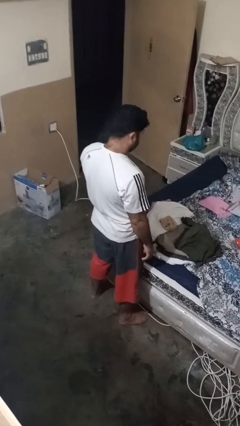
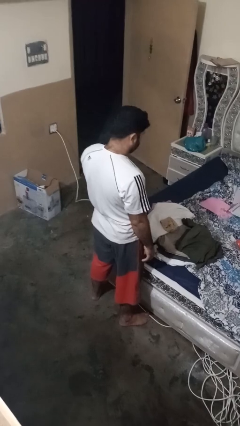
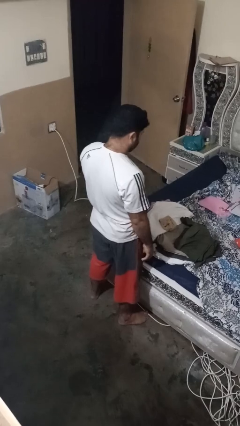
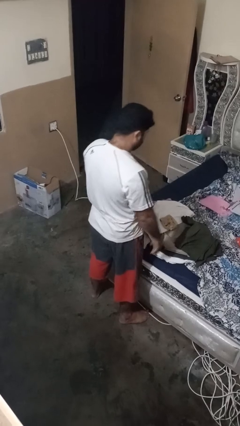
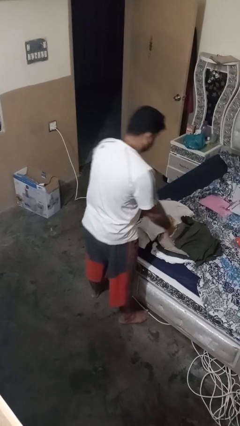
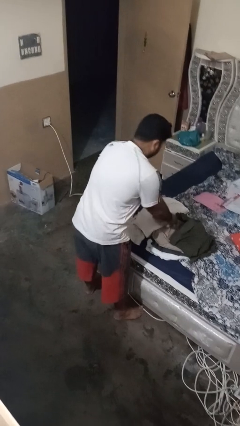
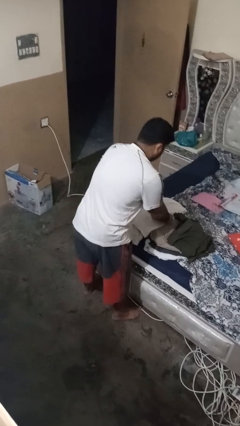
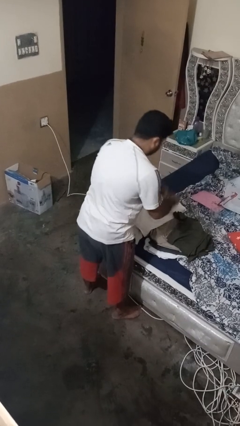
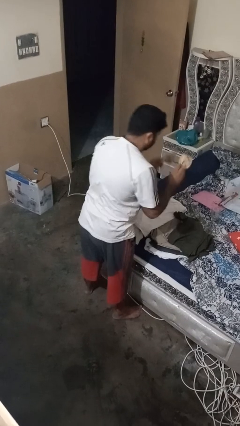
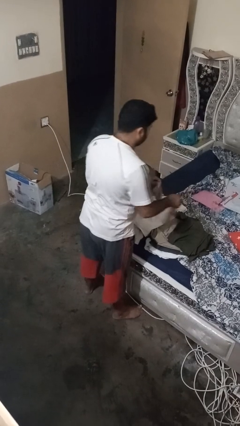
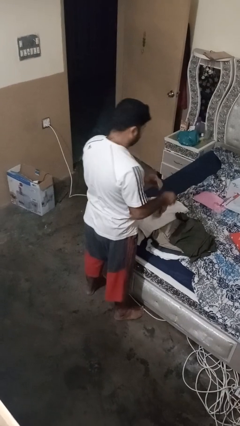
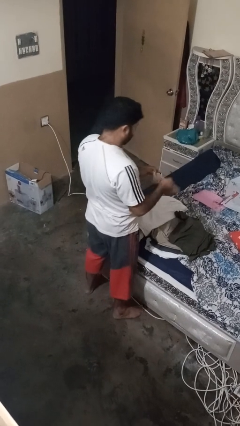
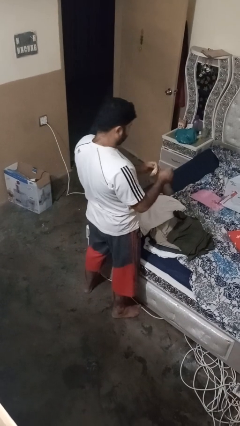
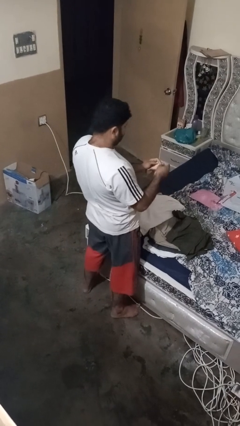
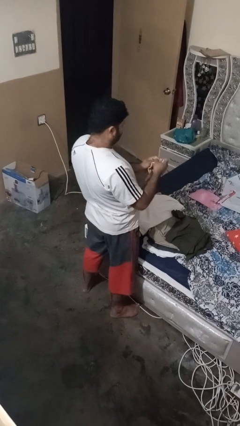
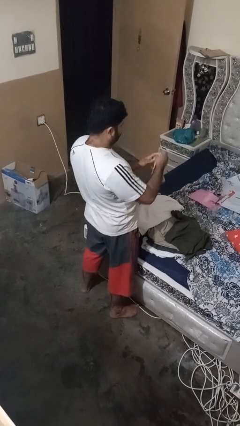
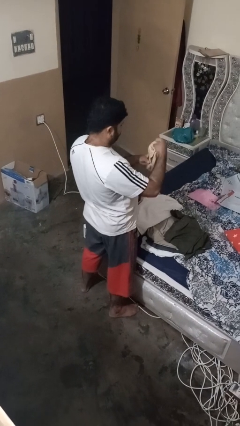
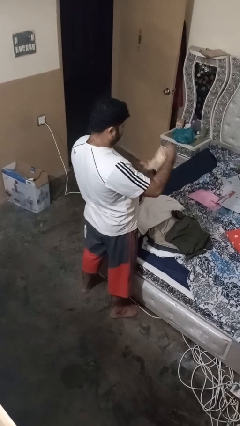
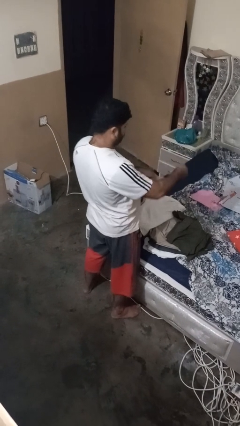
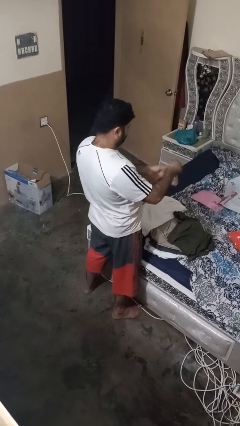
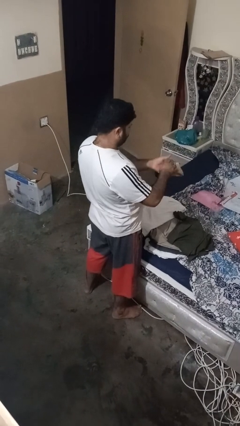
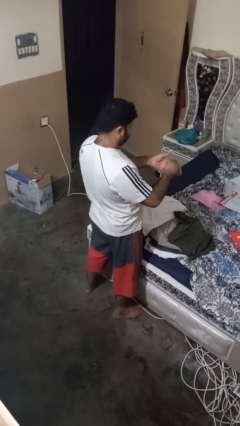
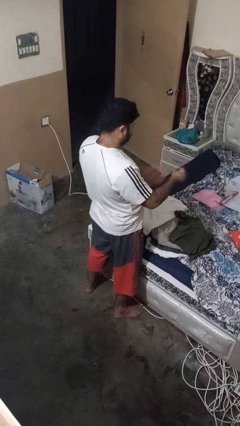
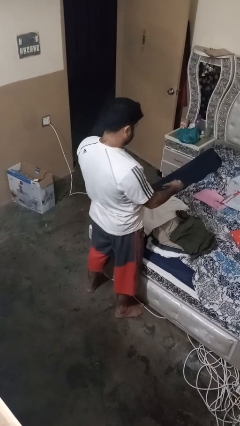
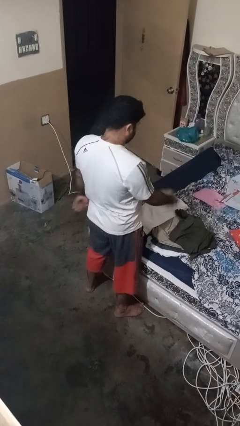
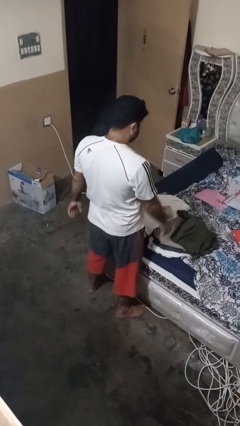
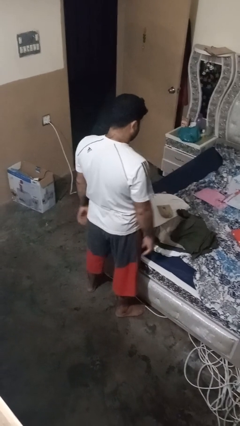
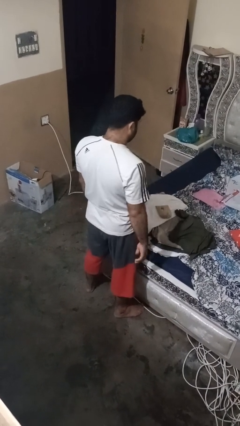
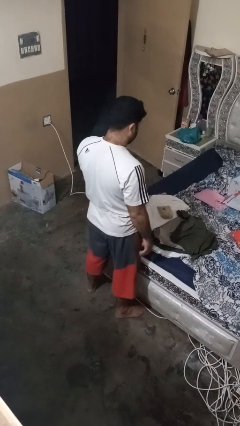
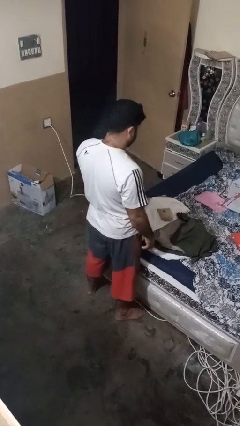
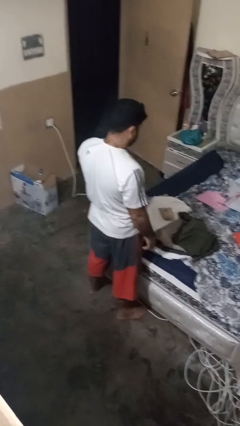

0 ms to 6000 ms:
person folds socks

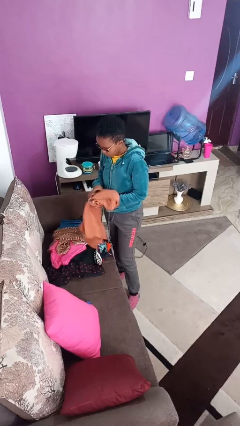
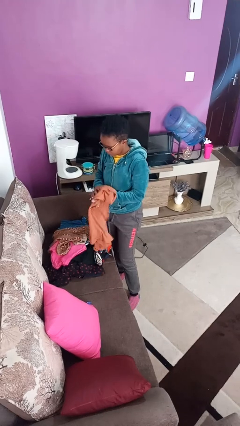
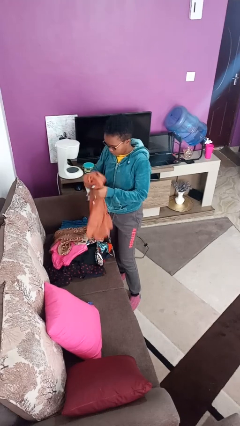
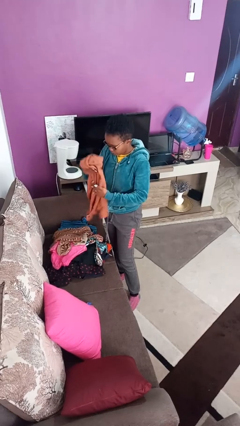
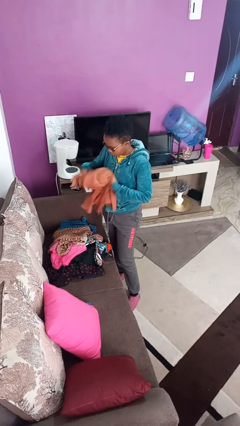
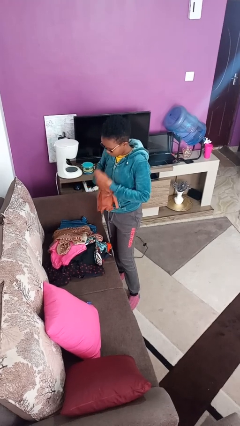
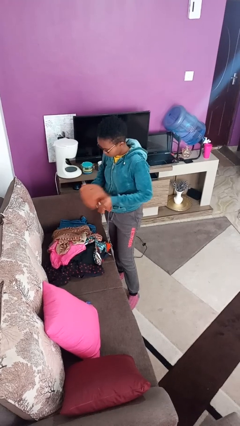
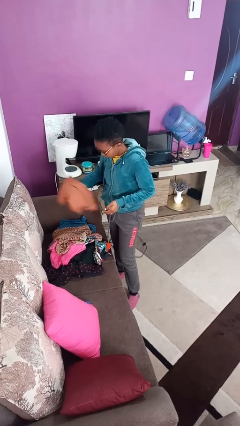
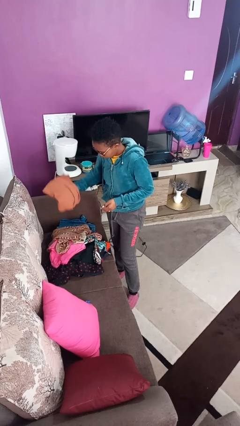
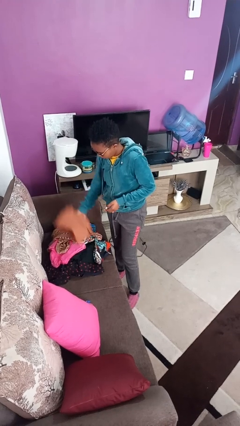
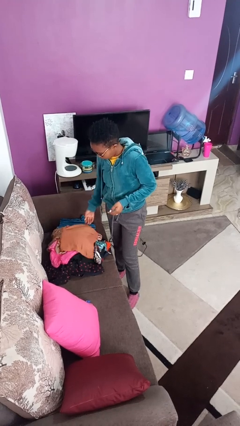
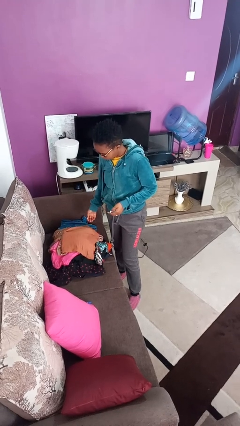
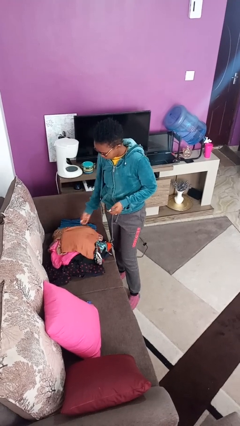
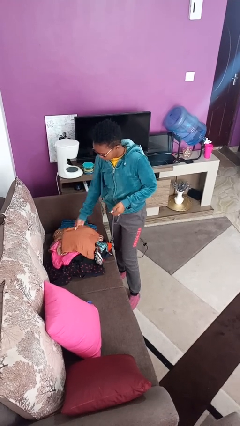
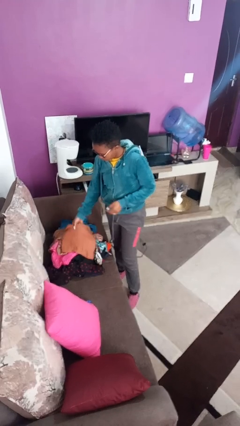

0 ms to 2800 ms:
person folds shirt

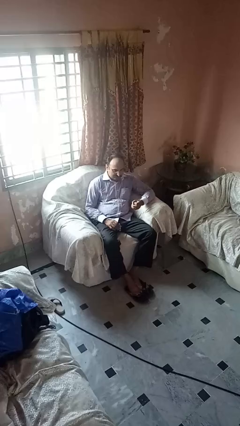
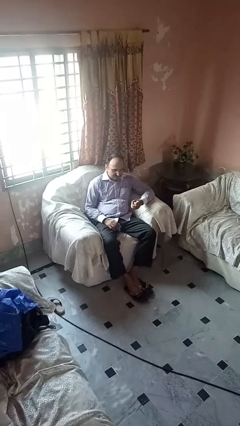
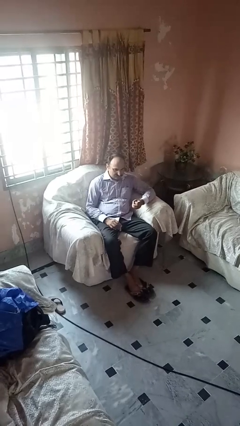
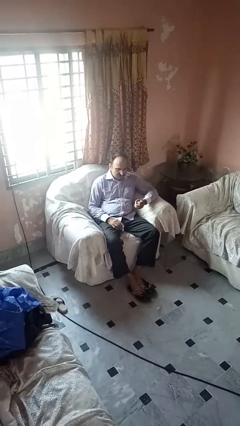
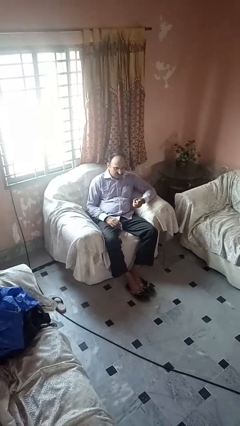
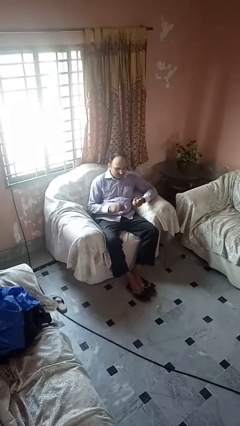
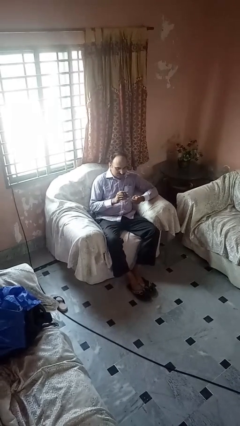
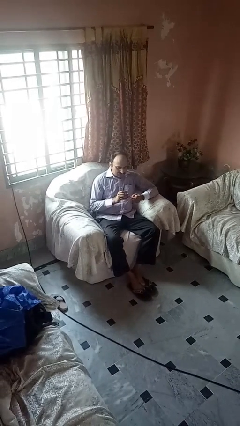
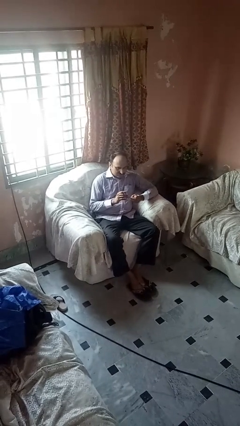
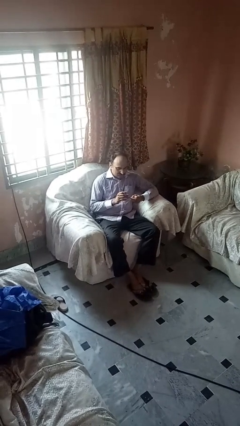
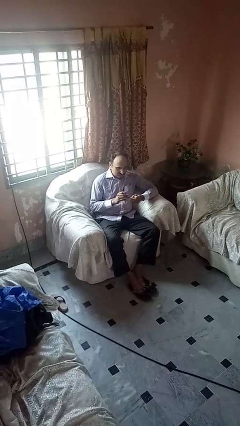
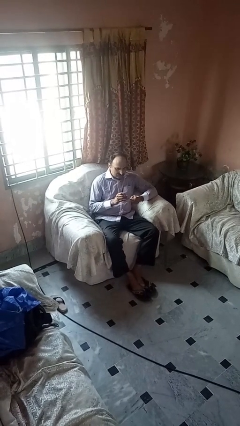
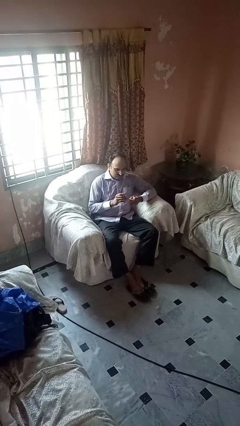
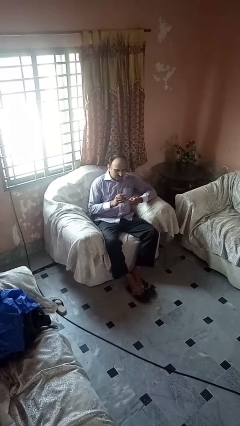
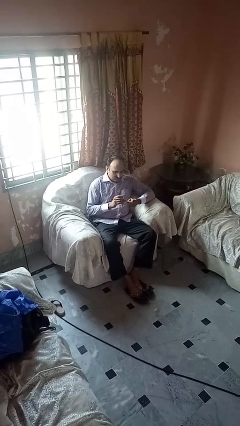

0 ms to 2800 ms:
person clips fingernails

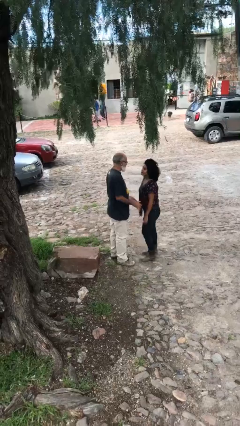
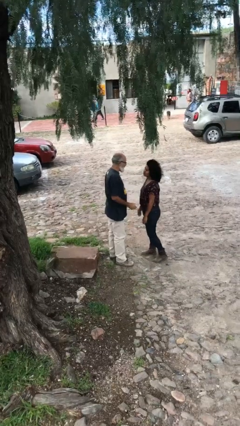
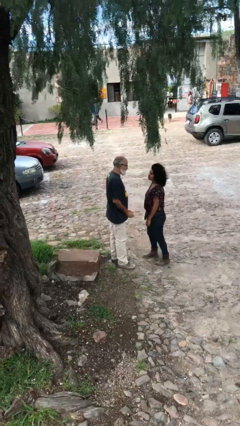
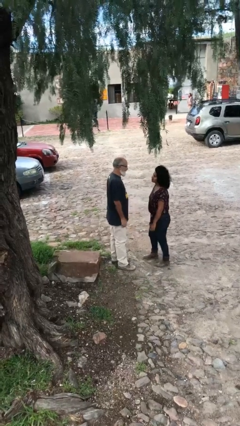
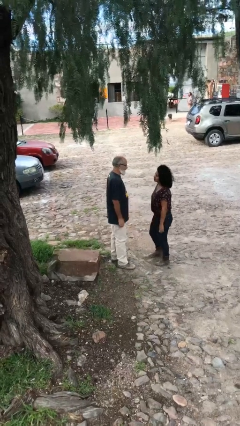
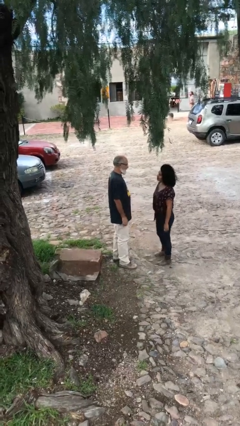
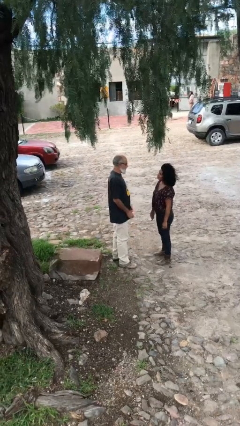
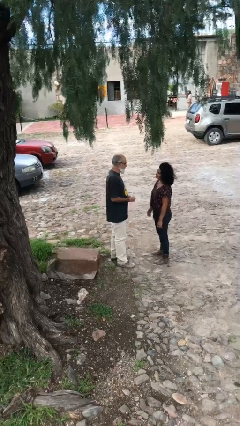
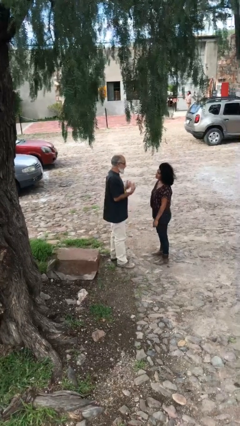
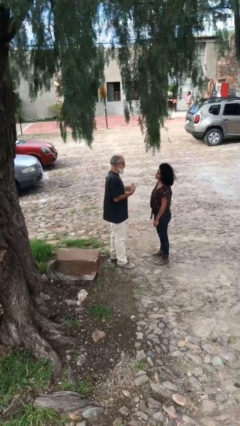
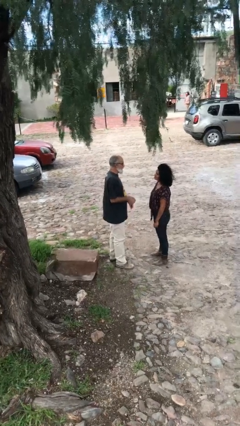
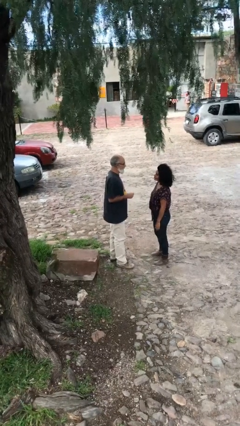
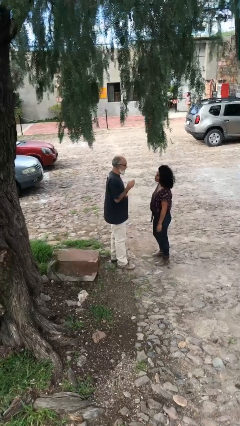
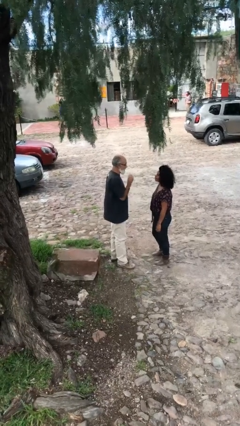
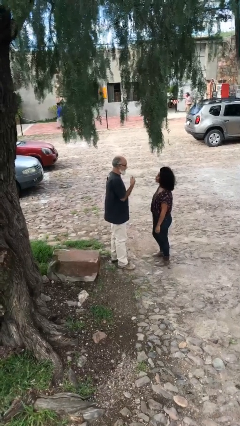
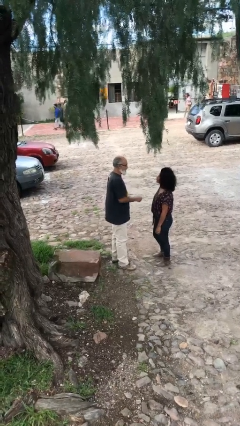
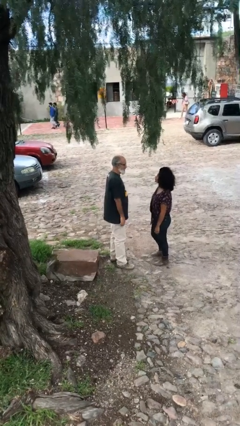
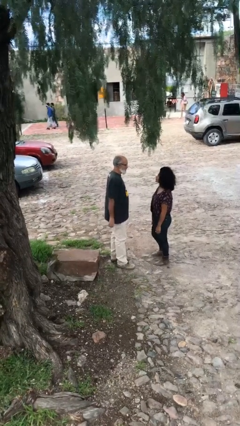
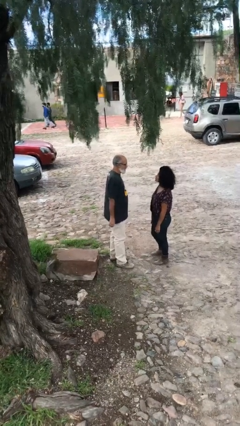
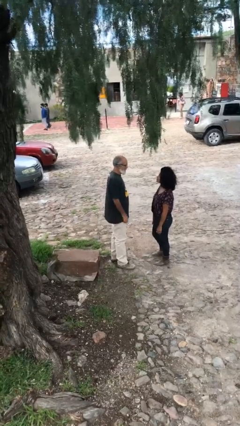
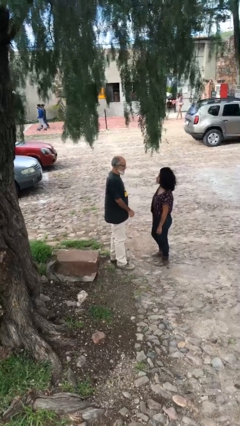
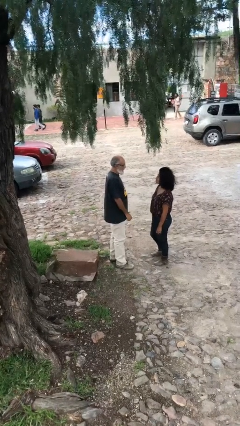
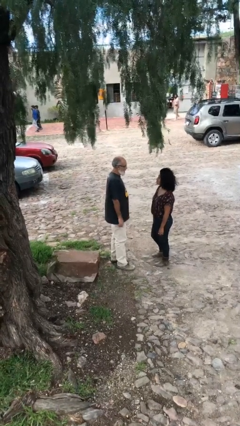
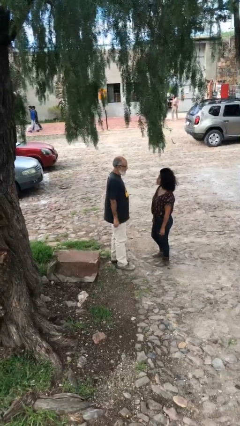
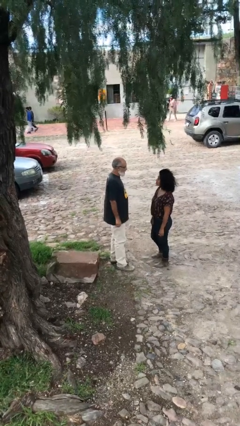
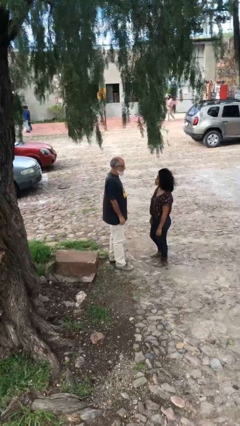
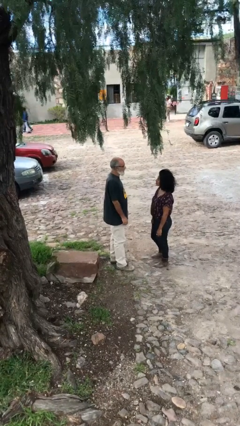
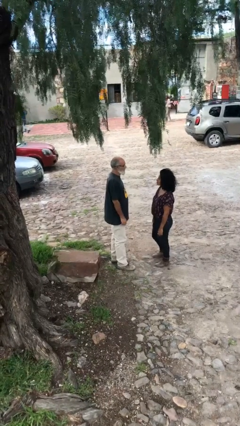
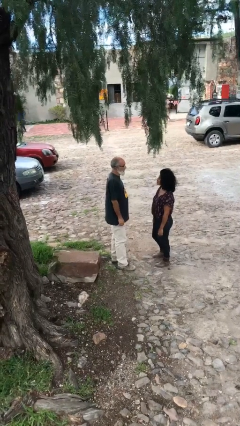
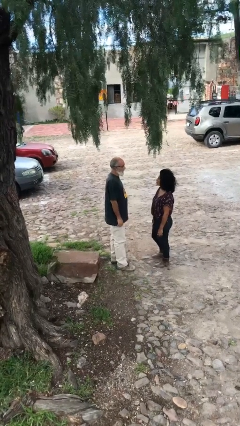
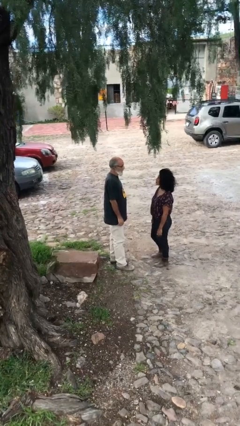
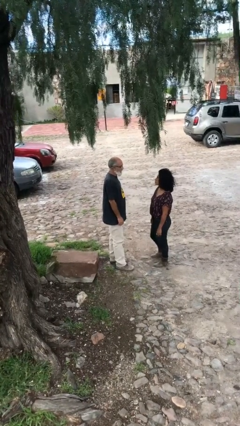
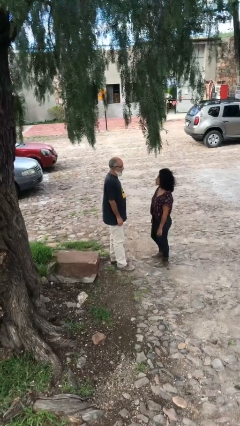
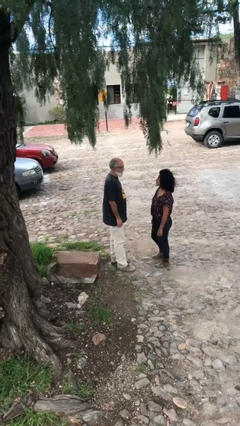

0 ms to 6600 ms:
person talks to person
